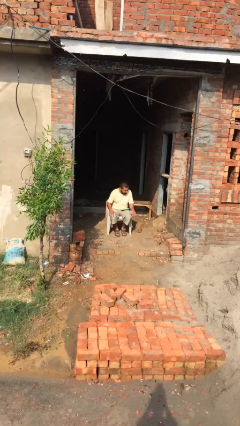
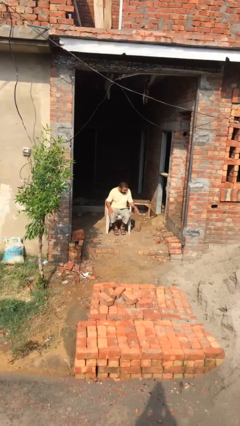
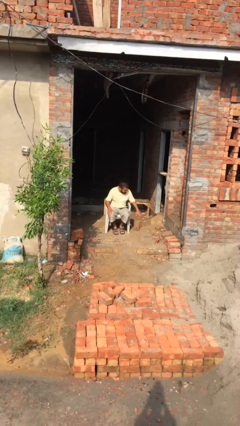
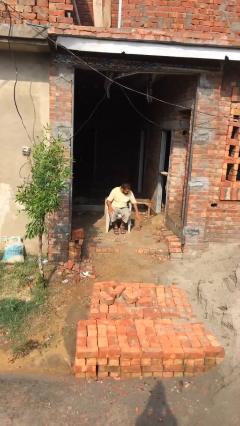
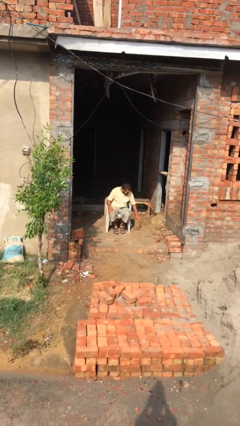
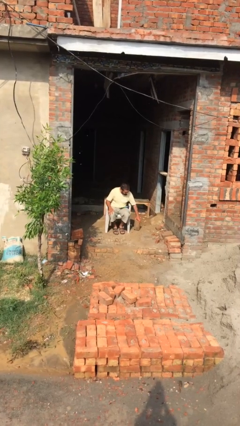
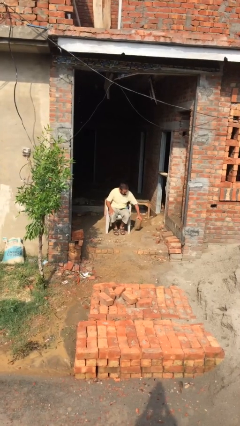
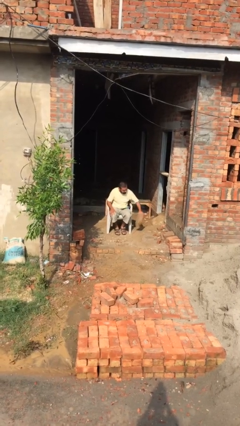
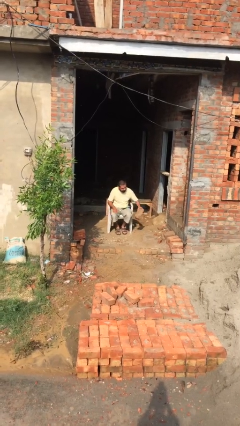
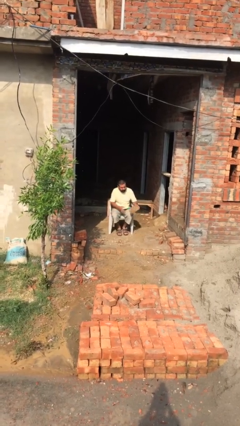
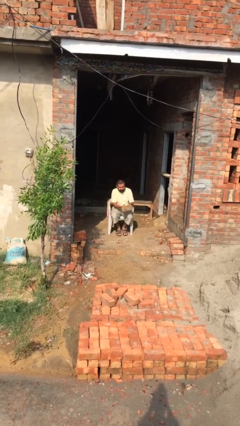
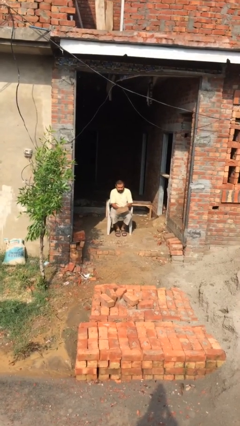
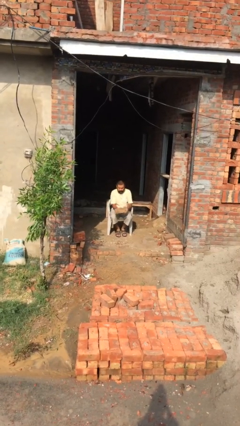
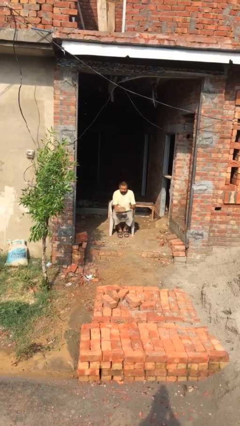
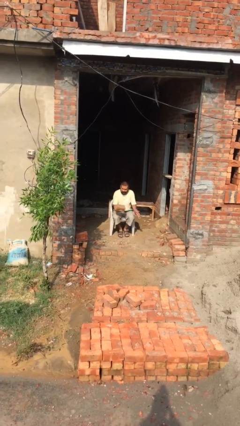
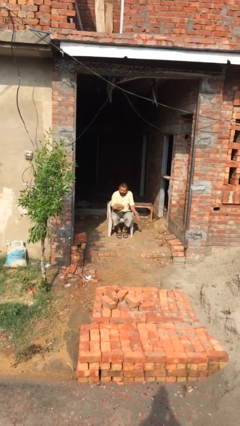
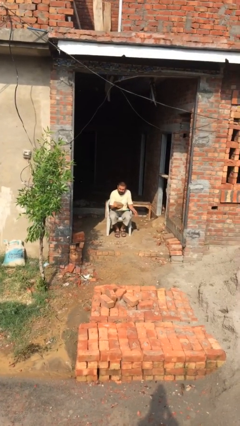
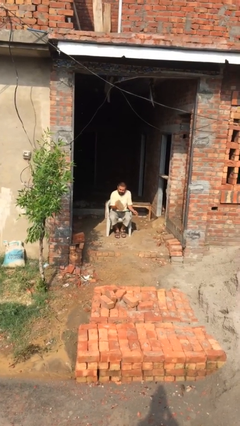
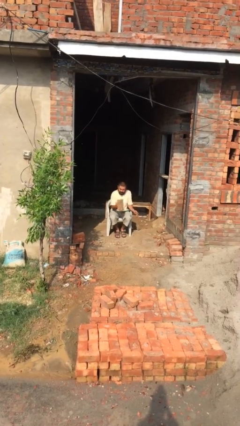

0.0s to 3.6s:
person picks up object from floor

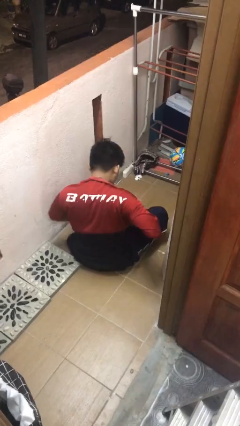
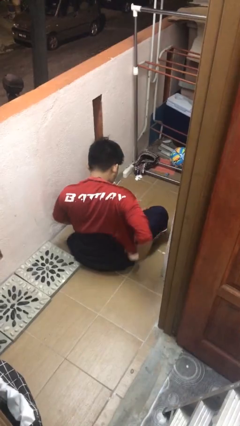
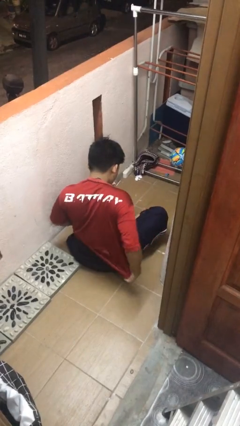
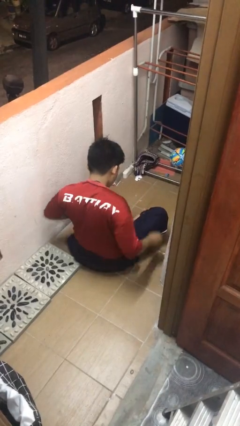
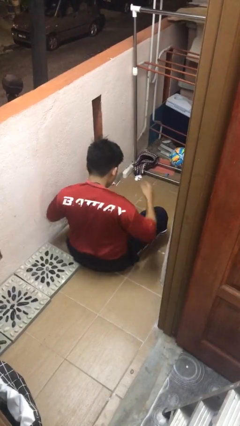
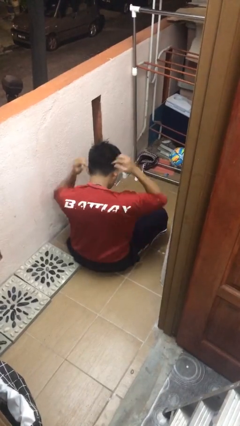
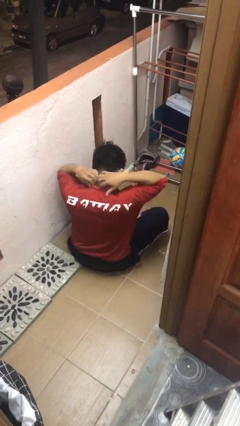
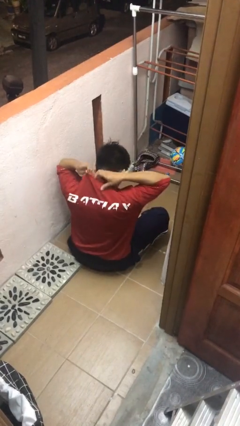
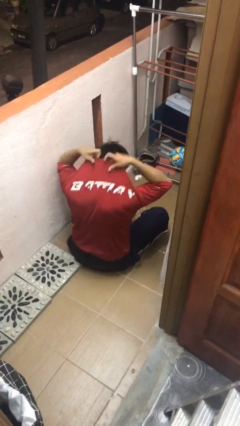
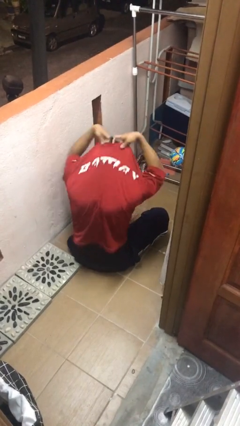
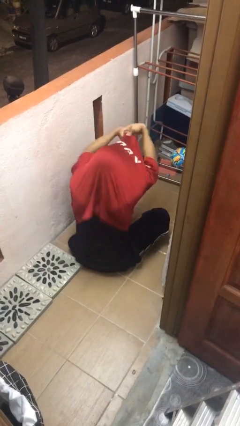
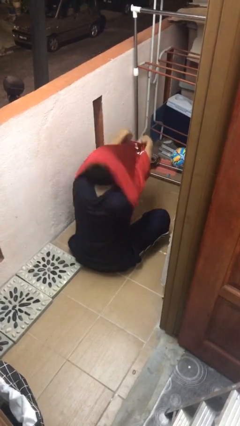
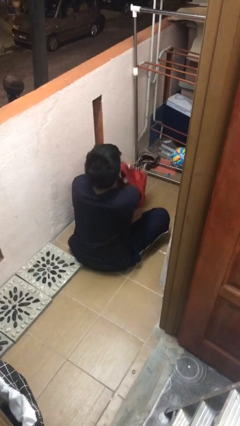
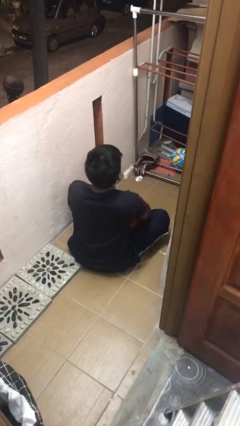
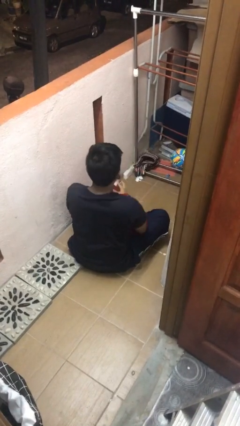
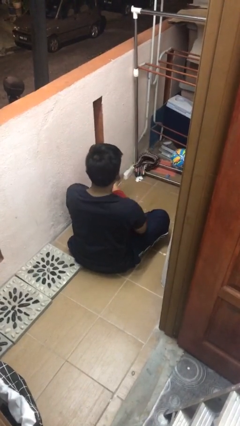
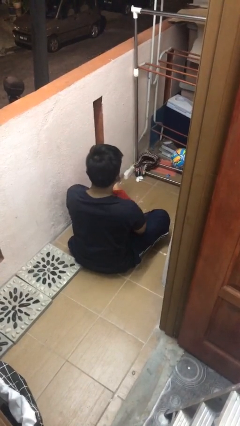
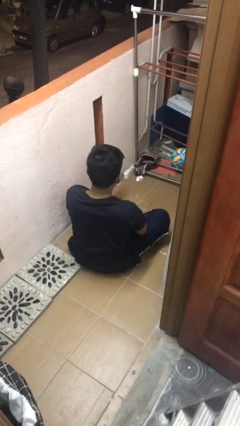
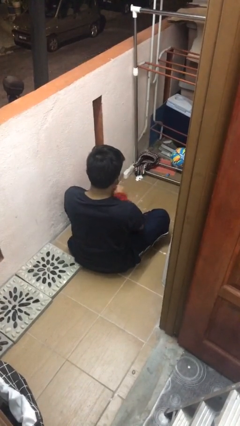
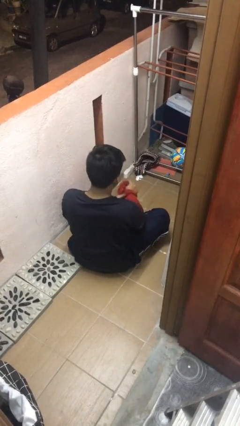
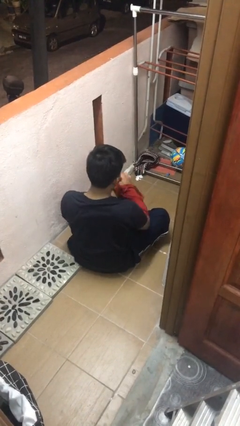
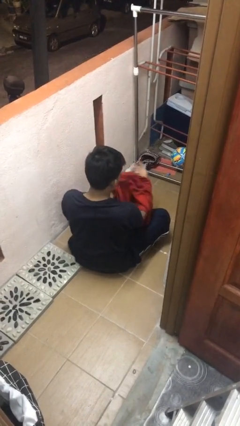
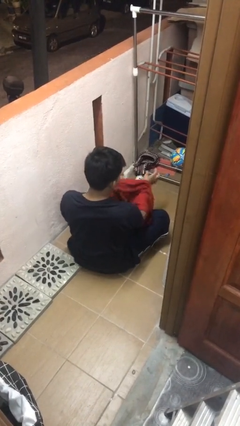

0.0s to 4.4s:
person takes off shirt

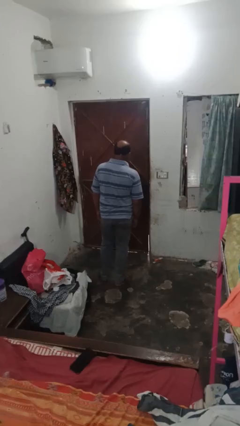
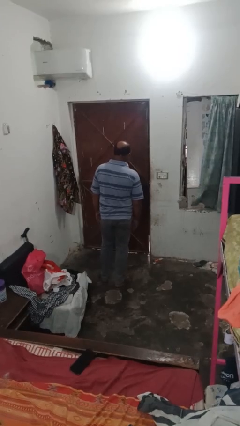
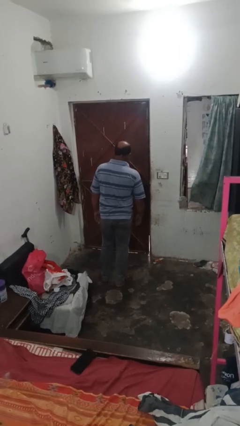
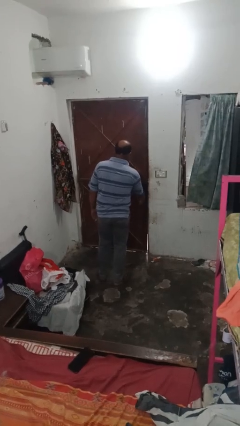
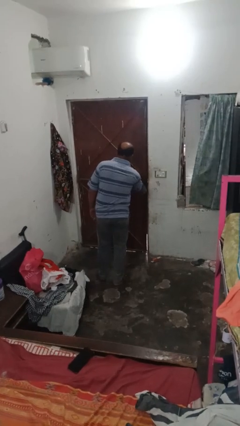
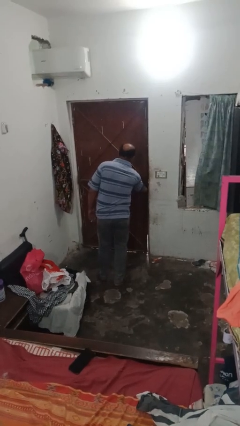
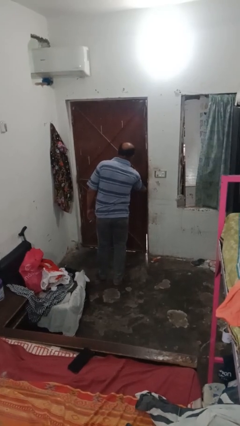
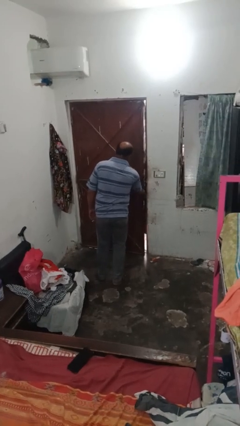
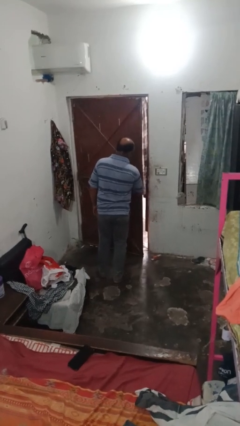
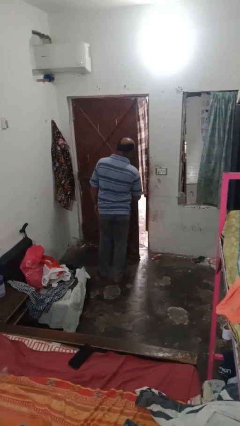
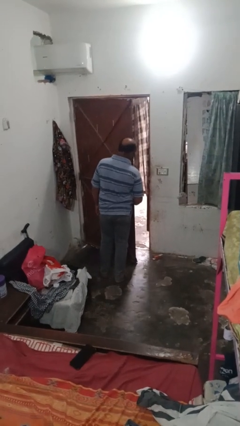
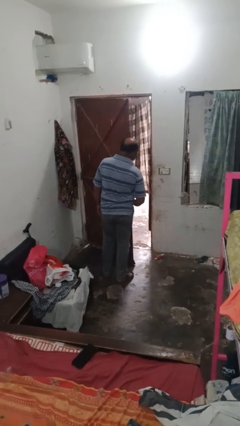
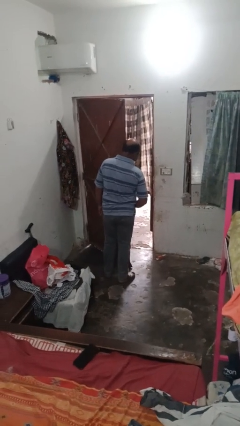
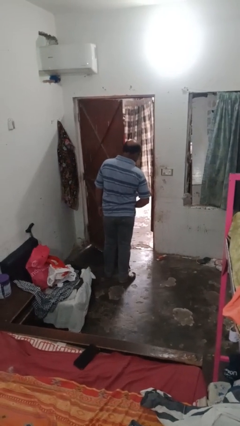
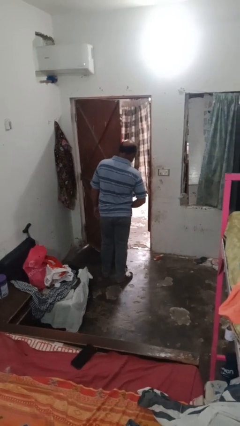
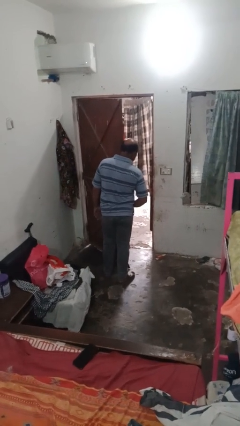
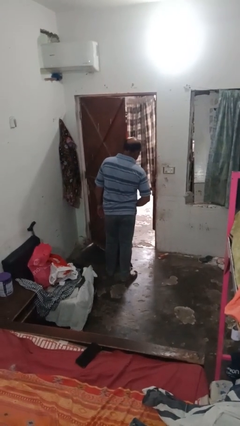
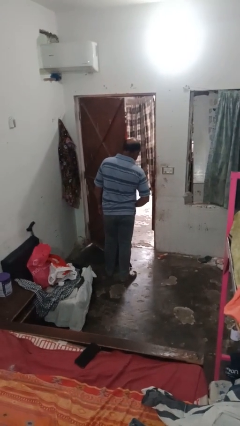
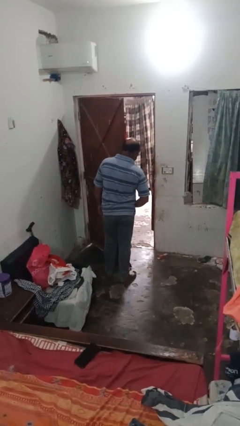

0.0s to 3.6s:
person opens closet door

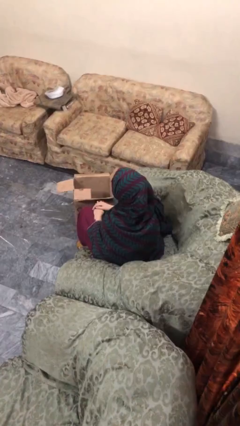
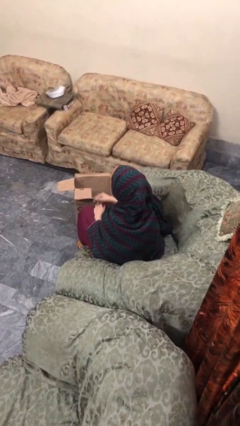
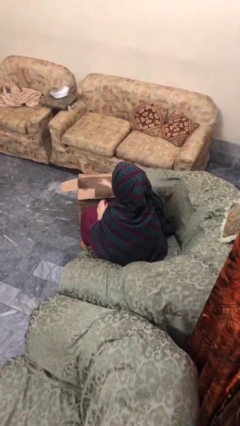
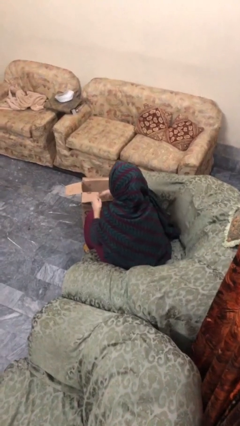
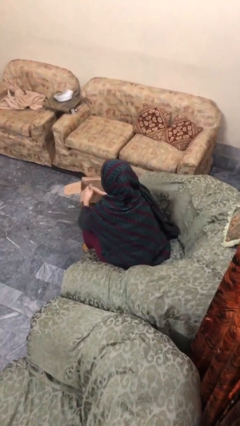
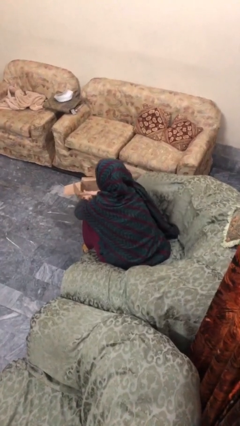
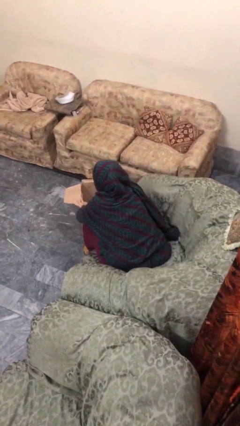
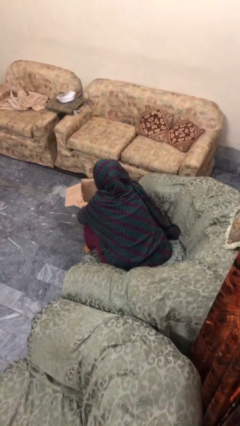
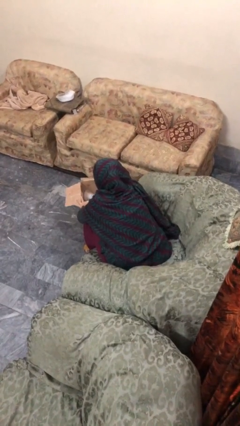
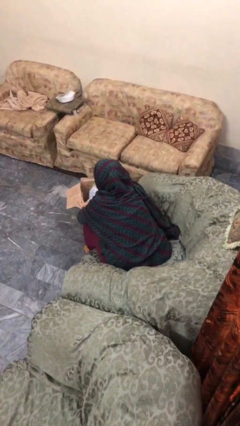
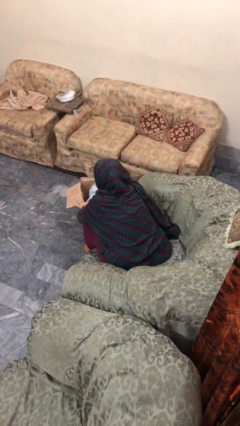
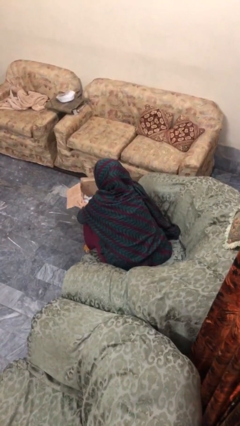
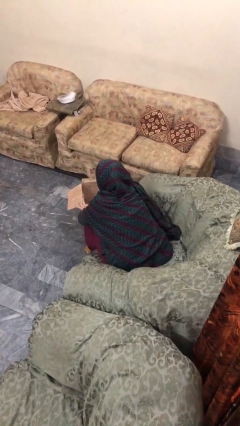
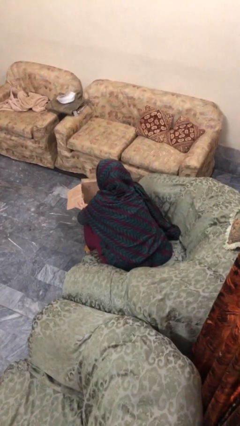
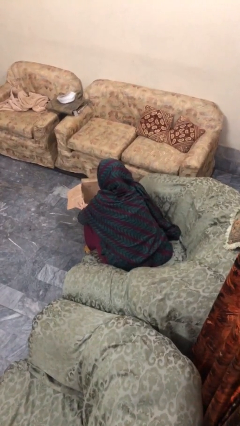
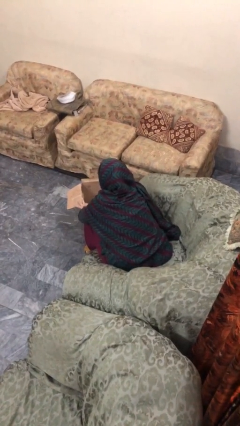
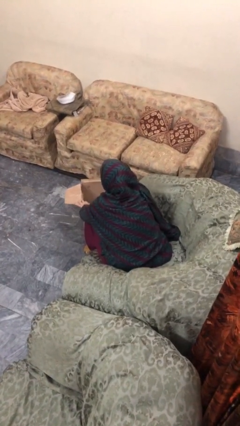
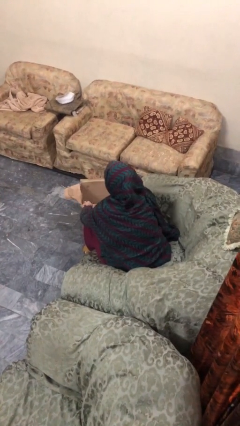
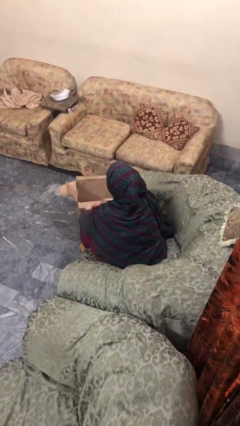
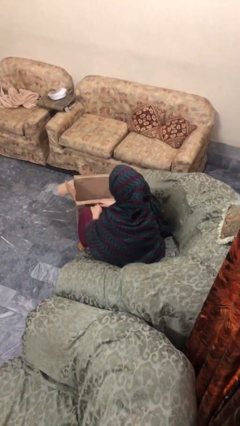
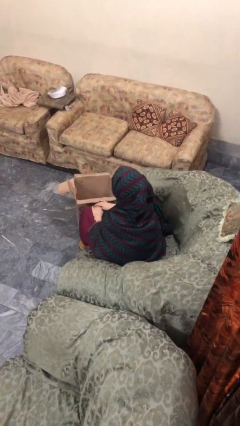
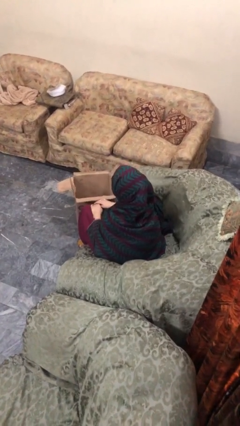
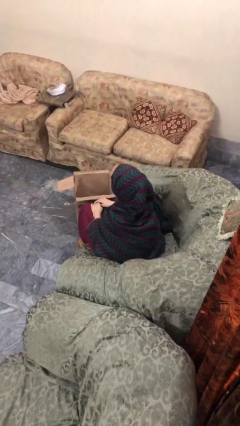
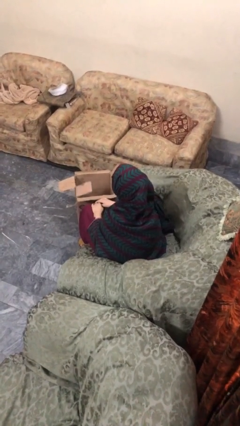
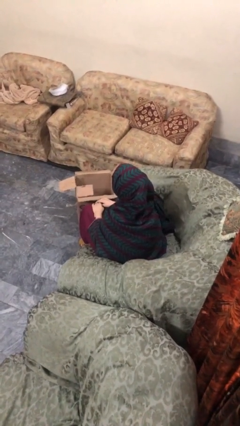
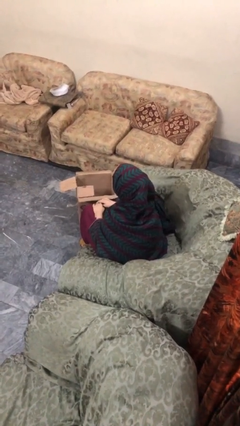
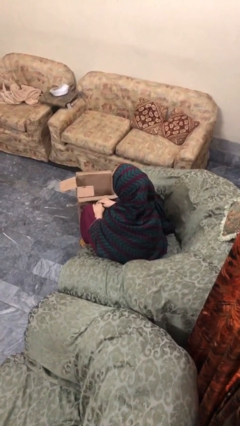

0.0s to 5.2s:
person searches in box

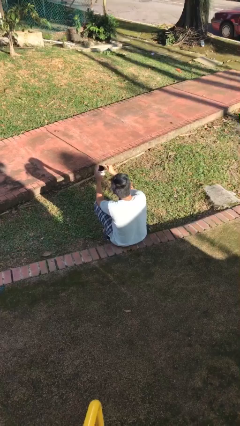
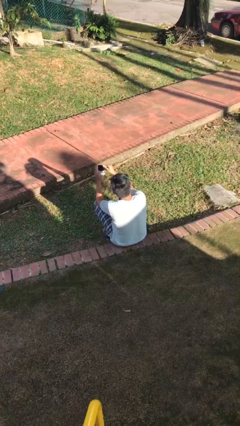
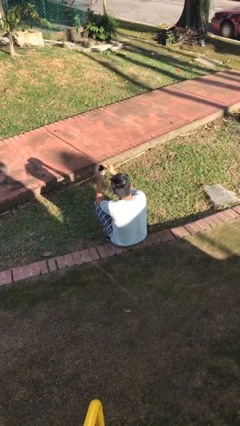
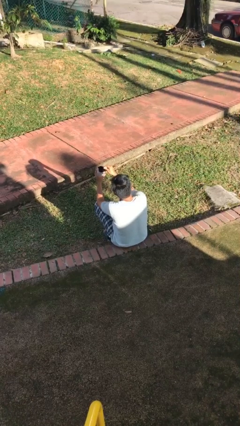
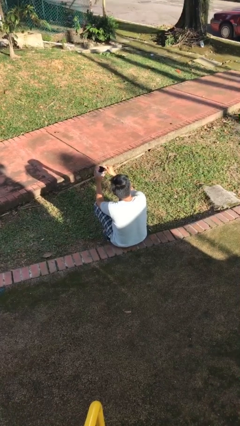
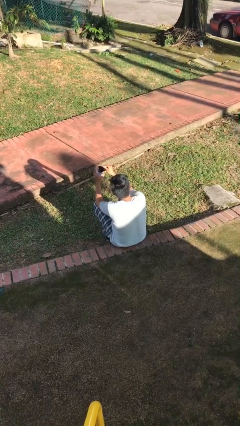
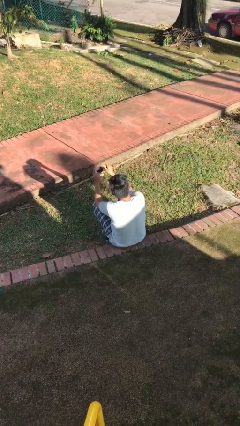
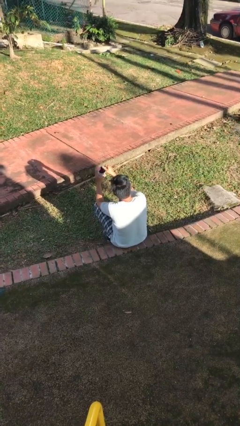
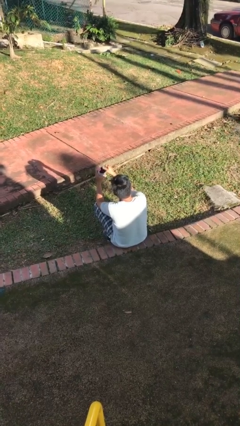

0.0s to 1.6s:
person stirs mug
